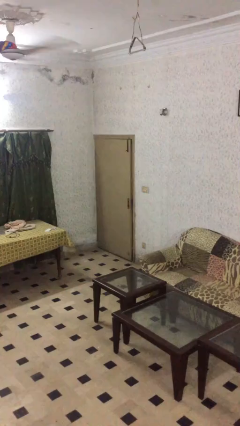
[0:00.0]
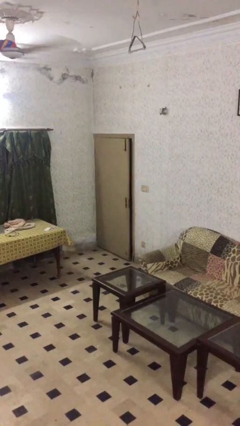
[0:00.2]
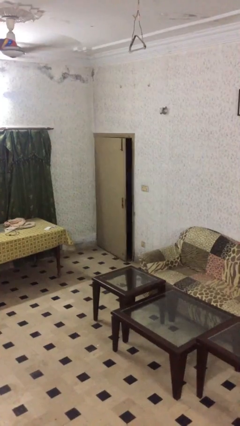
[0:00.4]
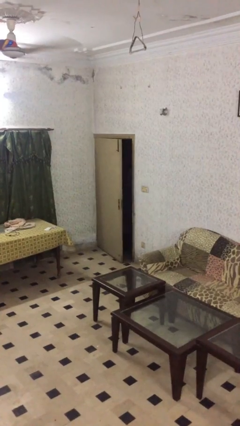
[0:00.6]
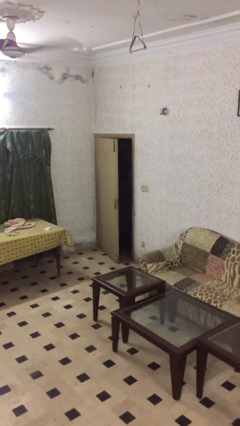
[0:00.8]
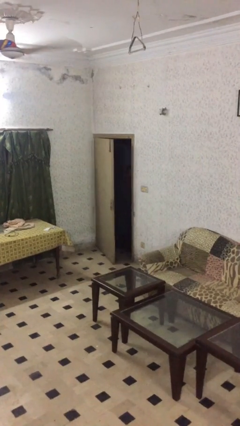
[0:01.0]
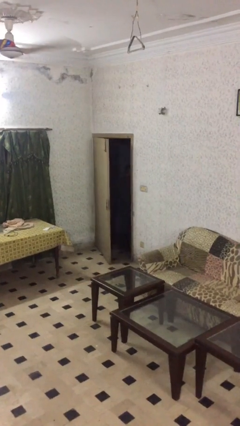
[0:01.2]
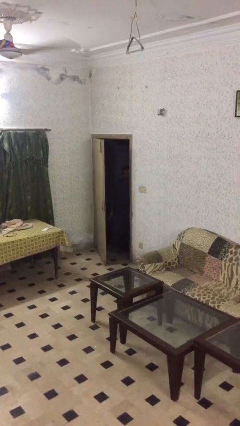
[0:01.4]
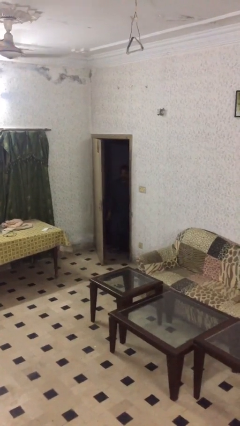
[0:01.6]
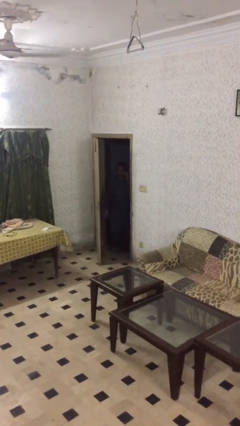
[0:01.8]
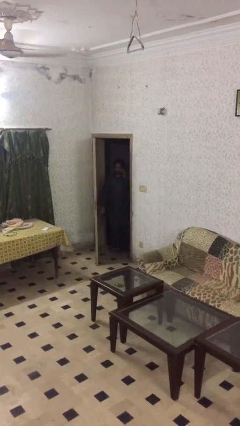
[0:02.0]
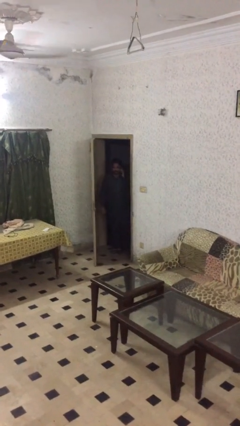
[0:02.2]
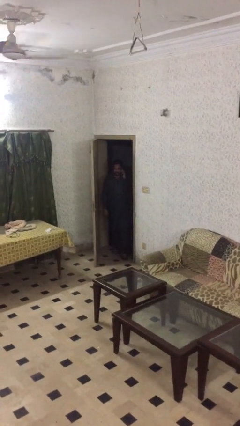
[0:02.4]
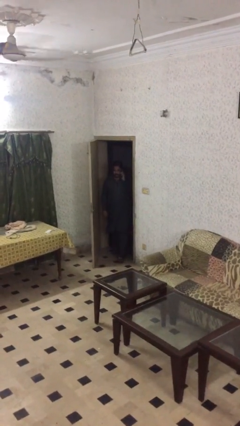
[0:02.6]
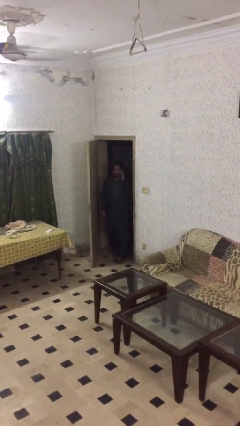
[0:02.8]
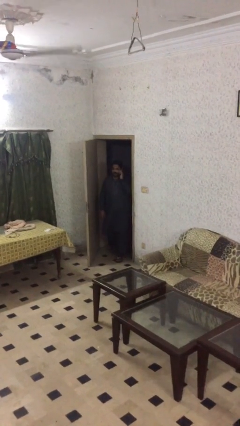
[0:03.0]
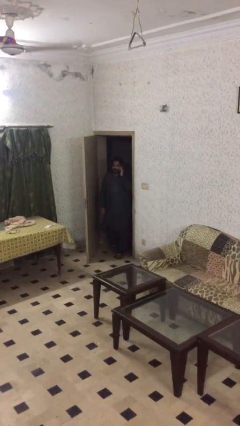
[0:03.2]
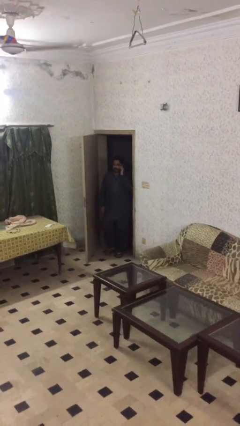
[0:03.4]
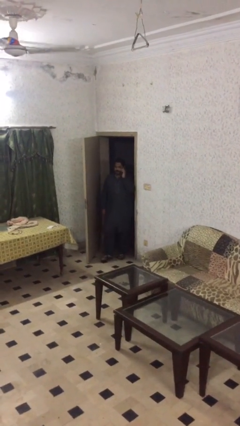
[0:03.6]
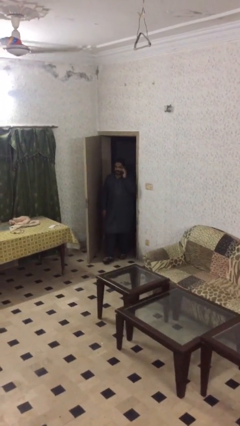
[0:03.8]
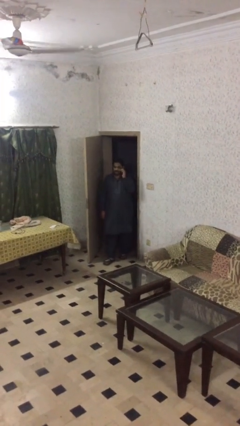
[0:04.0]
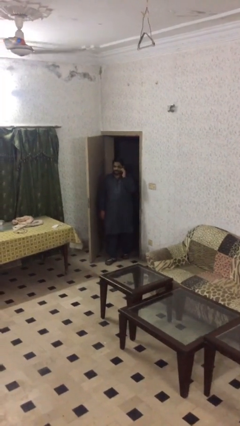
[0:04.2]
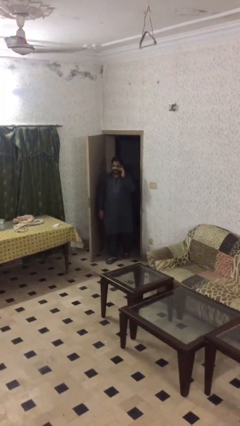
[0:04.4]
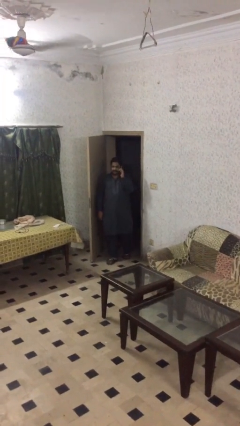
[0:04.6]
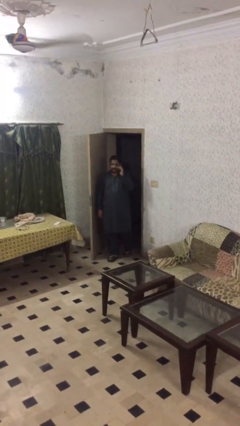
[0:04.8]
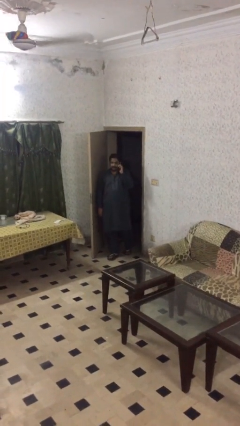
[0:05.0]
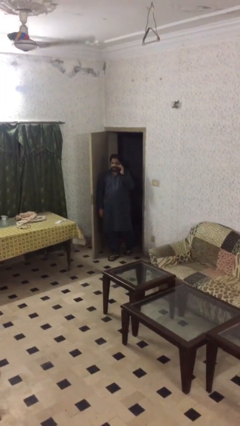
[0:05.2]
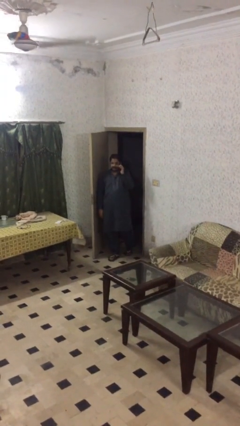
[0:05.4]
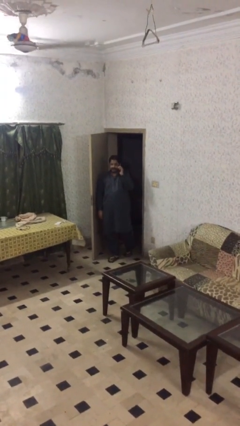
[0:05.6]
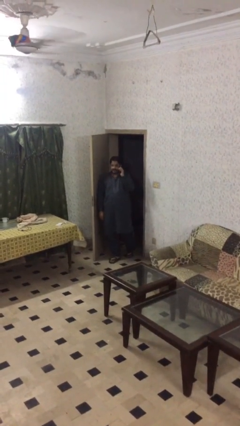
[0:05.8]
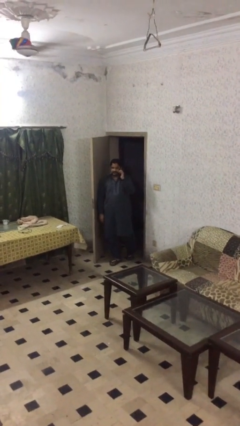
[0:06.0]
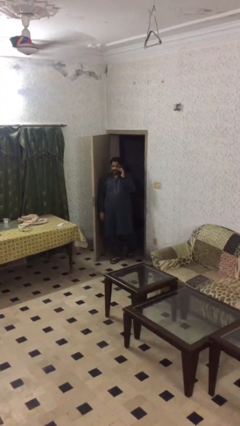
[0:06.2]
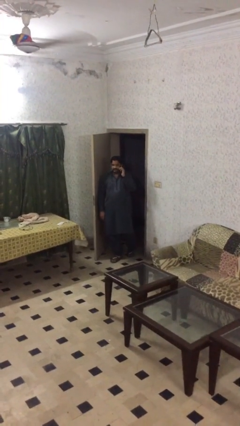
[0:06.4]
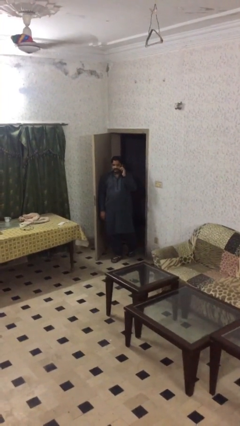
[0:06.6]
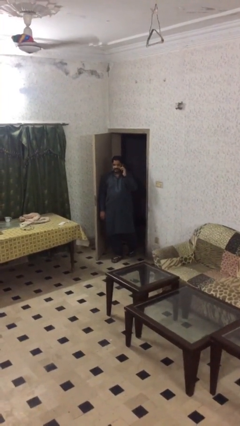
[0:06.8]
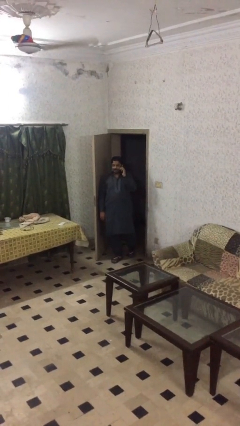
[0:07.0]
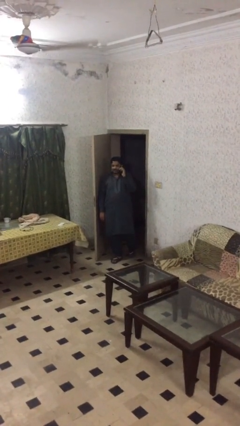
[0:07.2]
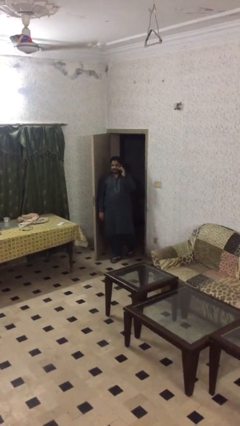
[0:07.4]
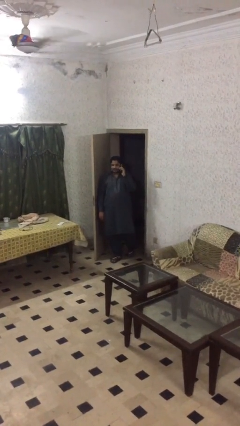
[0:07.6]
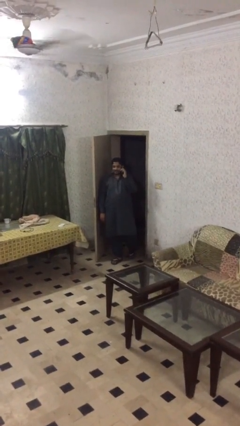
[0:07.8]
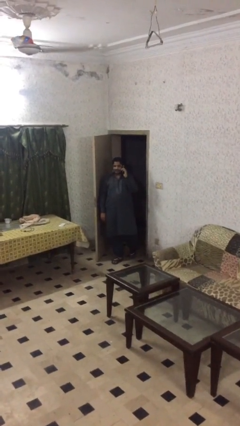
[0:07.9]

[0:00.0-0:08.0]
person enters scene through structure

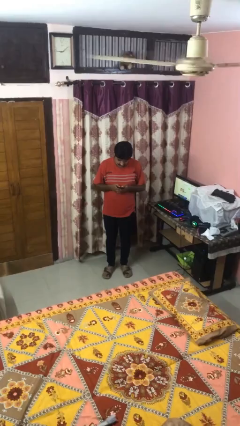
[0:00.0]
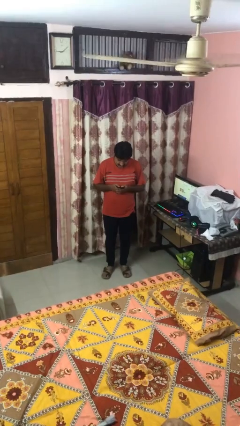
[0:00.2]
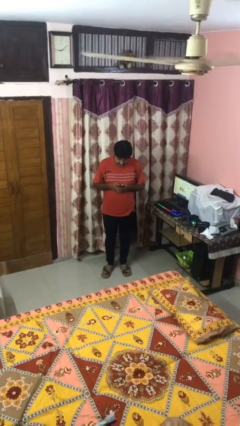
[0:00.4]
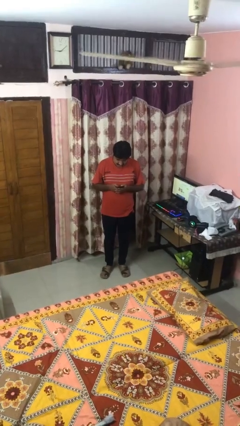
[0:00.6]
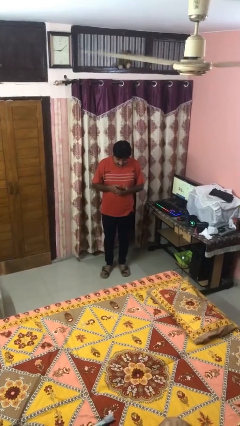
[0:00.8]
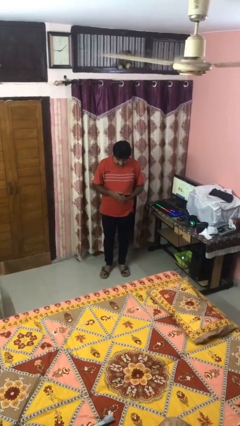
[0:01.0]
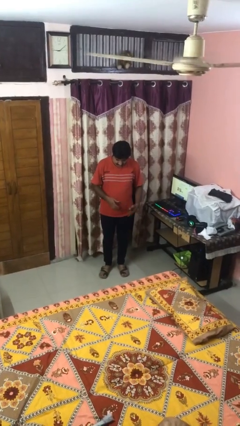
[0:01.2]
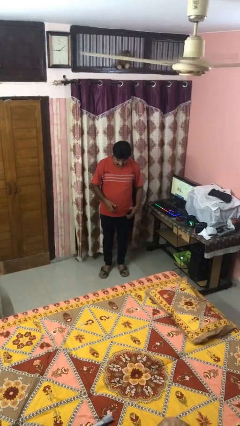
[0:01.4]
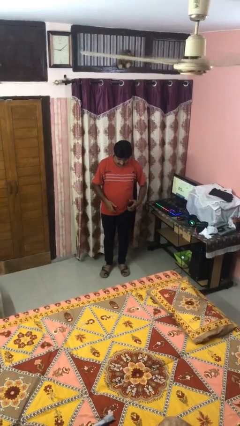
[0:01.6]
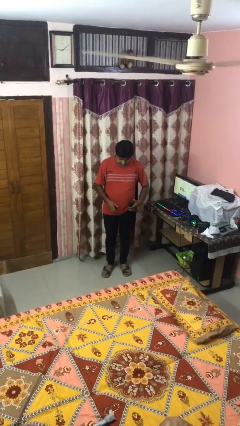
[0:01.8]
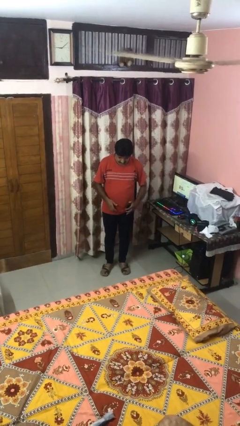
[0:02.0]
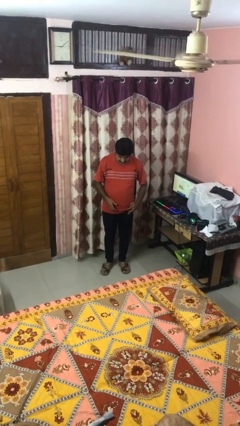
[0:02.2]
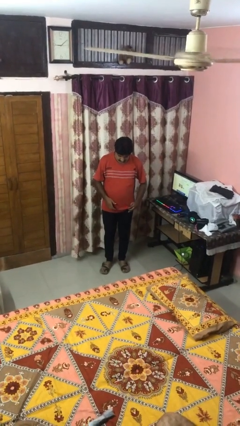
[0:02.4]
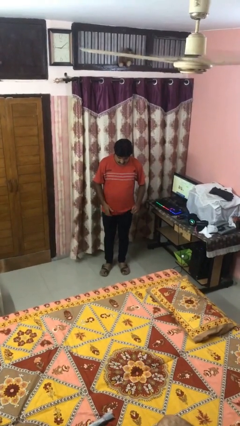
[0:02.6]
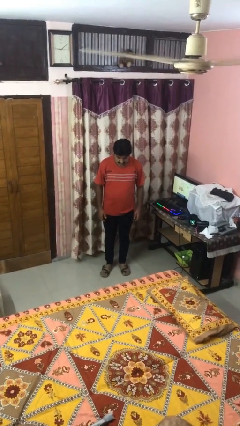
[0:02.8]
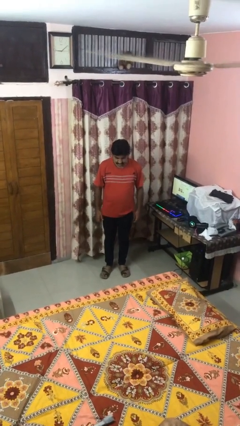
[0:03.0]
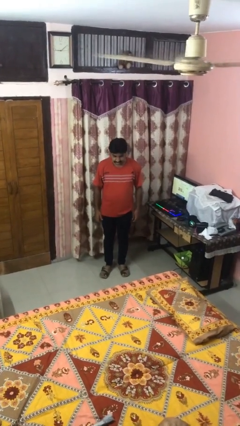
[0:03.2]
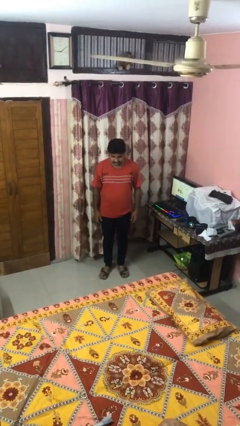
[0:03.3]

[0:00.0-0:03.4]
person puts phone into pocket

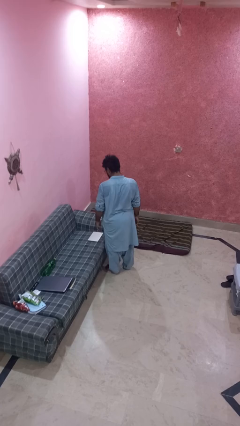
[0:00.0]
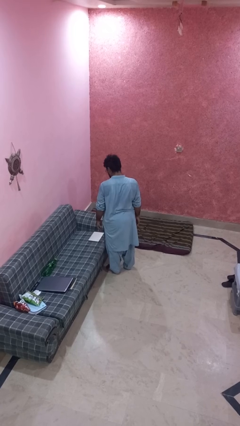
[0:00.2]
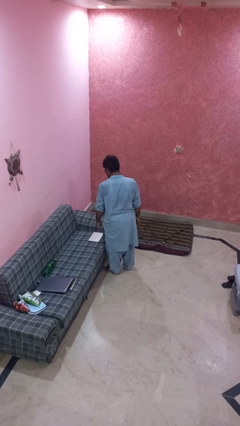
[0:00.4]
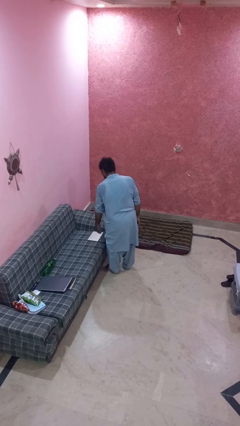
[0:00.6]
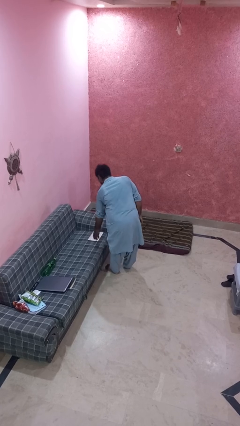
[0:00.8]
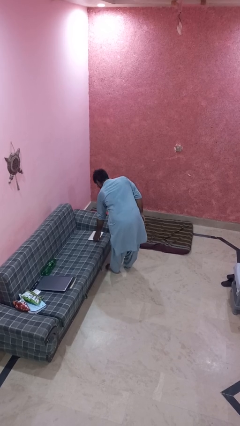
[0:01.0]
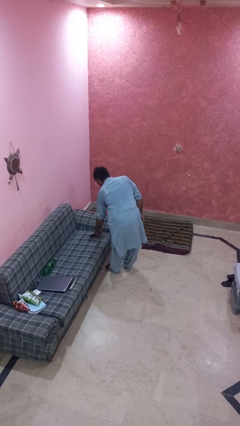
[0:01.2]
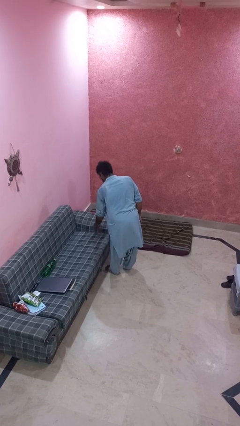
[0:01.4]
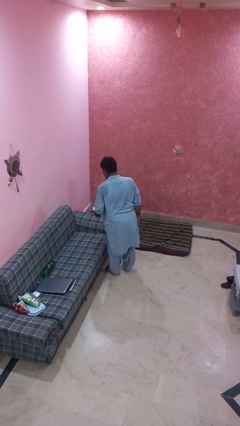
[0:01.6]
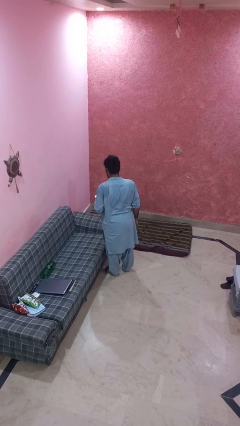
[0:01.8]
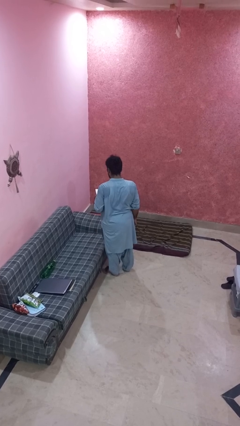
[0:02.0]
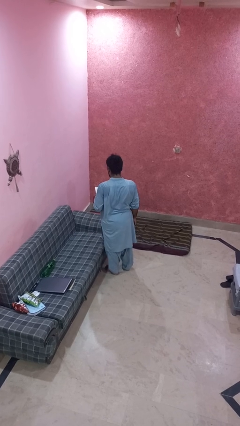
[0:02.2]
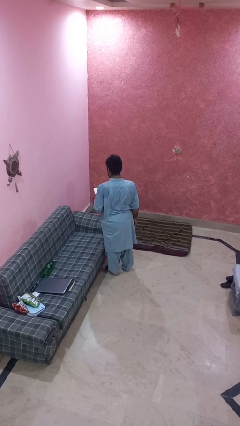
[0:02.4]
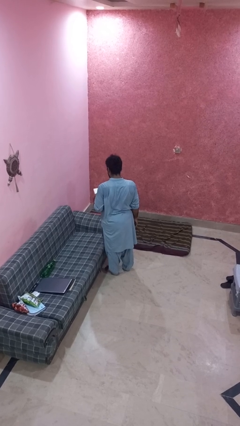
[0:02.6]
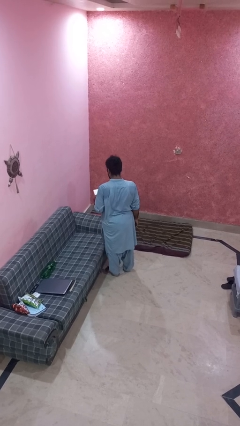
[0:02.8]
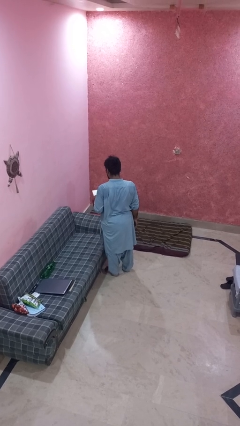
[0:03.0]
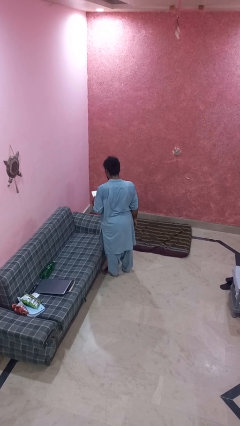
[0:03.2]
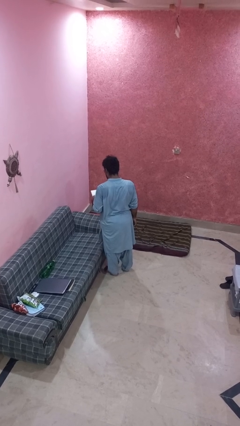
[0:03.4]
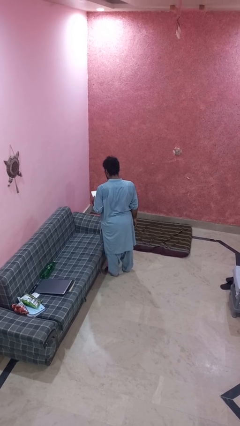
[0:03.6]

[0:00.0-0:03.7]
person picks up object from couch

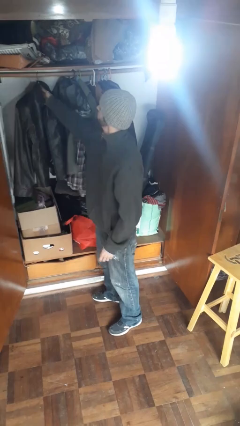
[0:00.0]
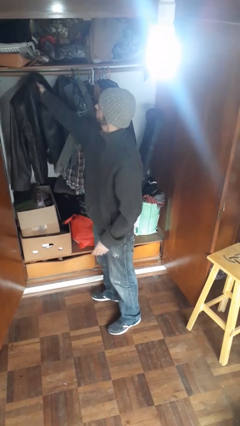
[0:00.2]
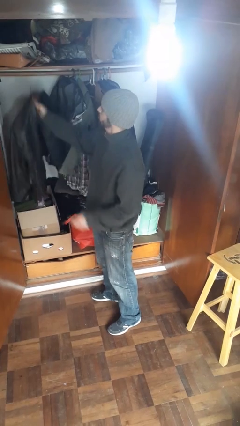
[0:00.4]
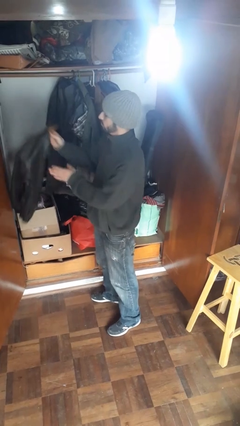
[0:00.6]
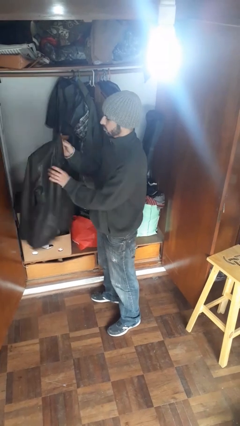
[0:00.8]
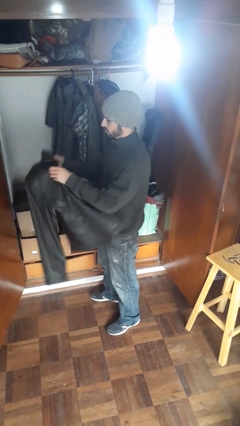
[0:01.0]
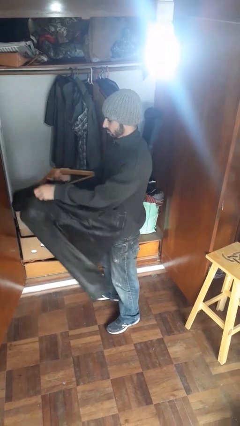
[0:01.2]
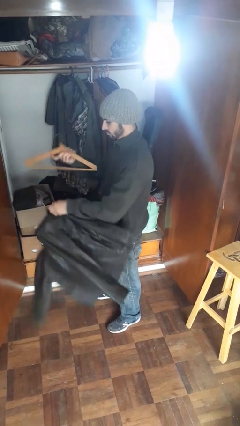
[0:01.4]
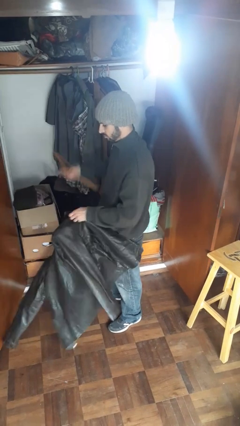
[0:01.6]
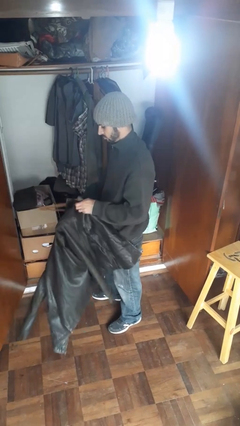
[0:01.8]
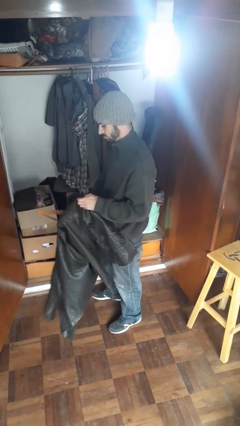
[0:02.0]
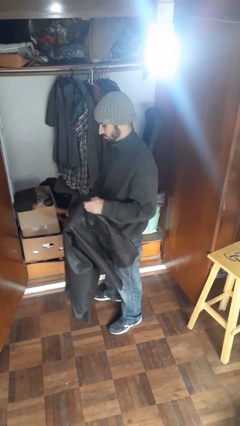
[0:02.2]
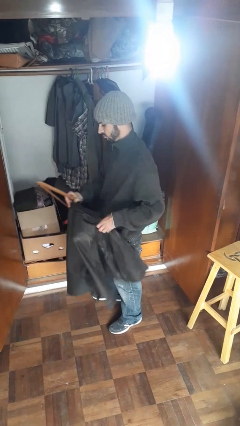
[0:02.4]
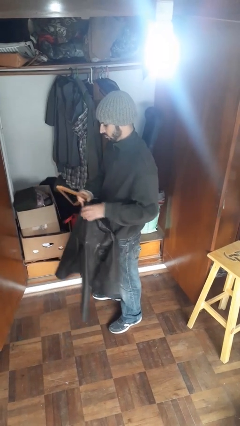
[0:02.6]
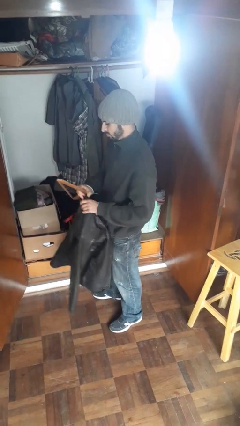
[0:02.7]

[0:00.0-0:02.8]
person takes clothes from closet
